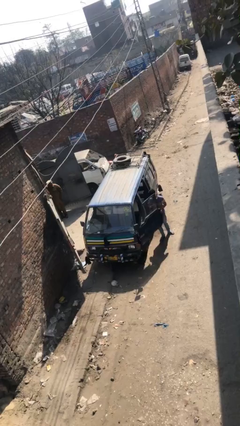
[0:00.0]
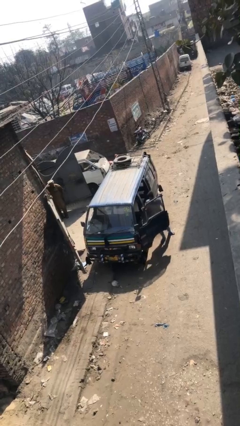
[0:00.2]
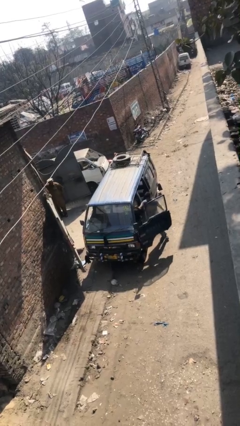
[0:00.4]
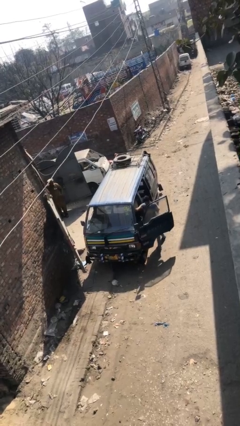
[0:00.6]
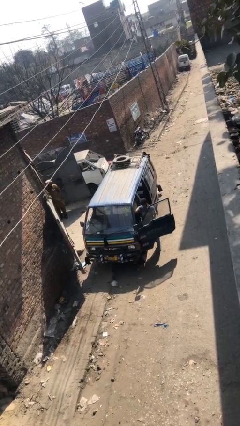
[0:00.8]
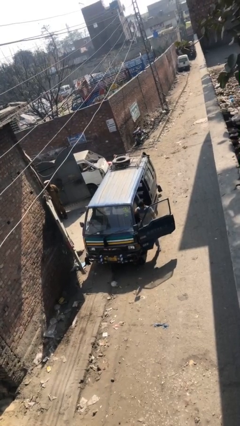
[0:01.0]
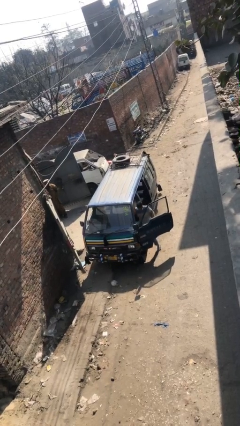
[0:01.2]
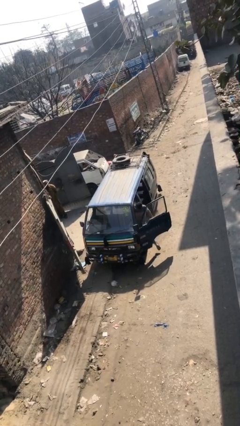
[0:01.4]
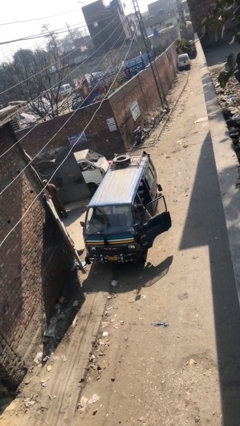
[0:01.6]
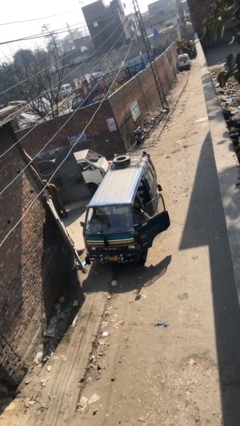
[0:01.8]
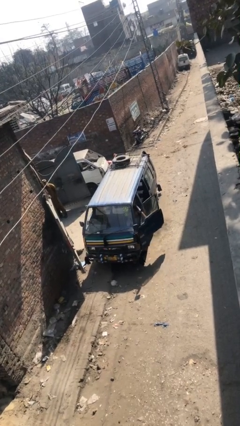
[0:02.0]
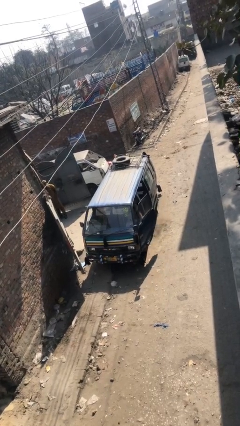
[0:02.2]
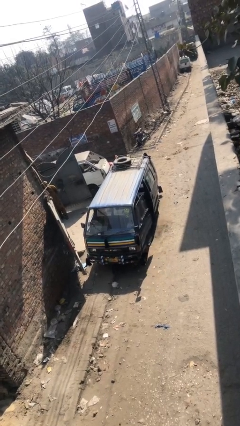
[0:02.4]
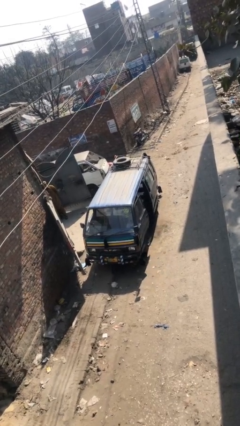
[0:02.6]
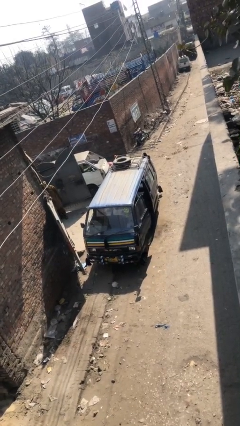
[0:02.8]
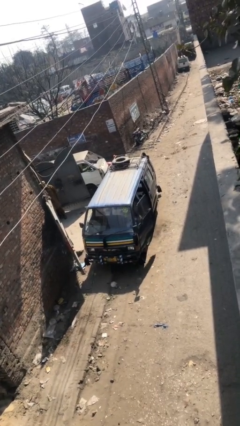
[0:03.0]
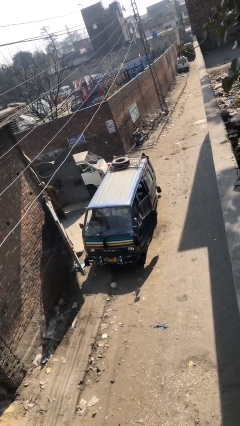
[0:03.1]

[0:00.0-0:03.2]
car picks up person

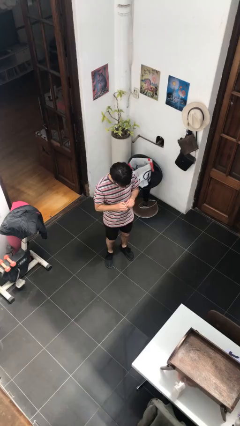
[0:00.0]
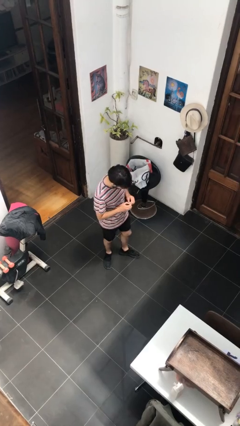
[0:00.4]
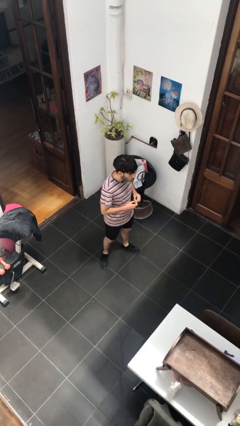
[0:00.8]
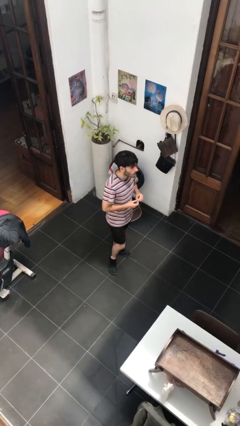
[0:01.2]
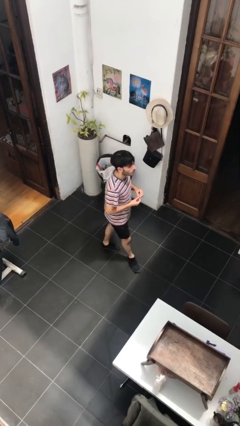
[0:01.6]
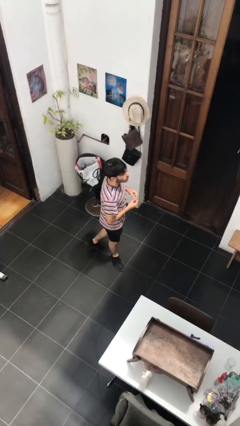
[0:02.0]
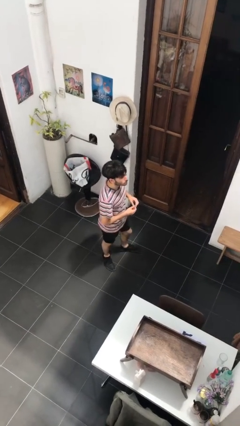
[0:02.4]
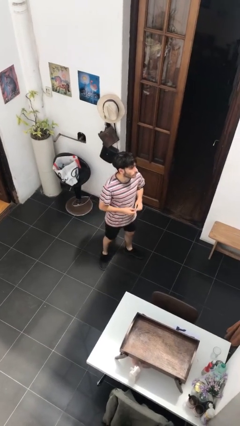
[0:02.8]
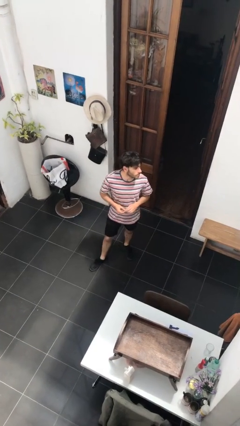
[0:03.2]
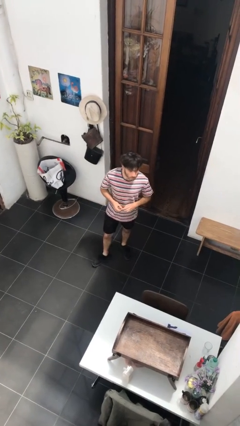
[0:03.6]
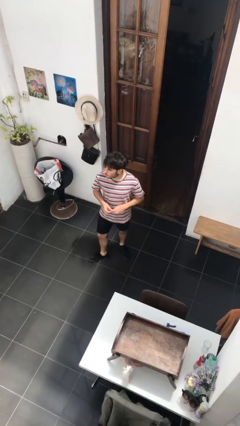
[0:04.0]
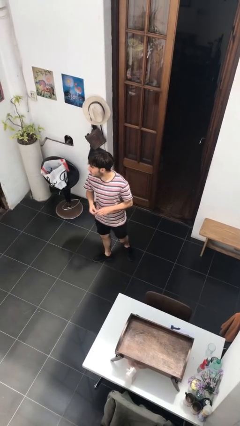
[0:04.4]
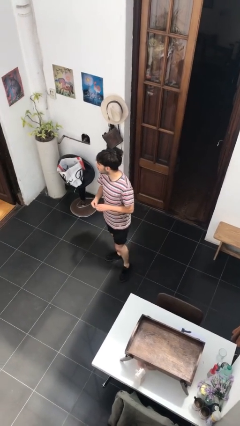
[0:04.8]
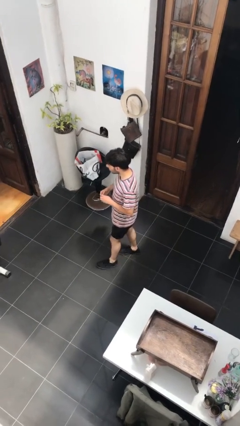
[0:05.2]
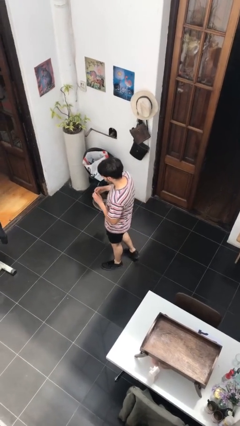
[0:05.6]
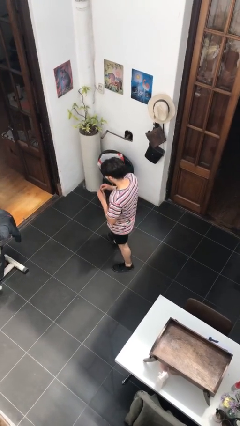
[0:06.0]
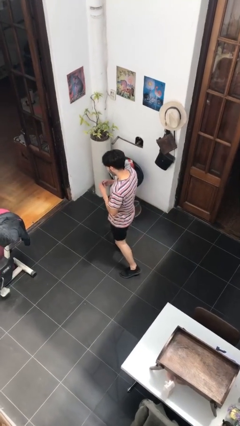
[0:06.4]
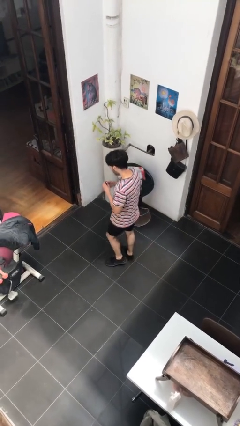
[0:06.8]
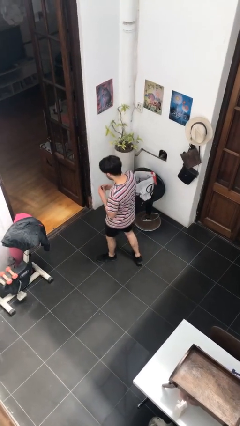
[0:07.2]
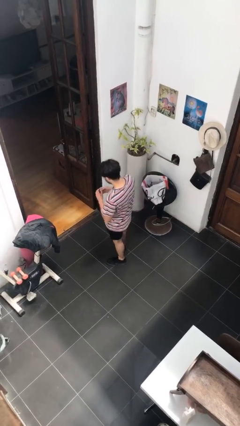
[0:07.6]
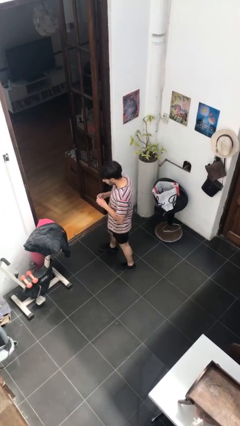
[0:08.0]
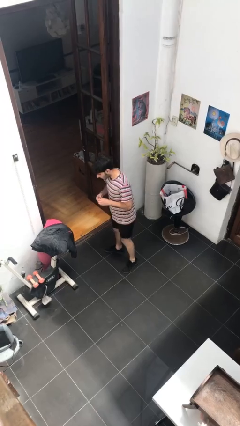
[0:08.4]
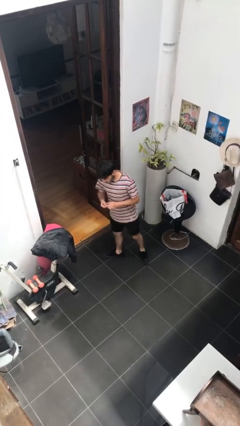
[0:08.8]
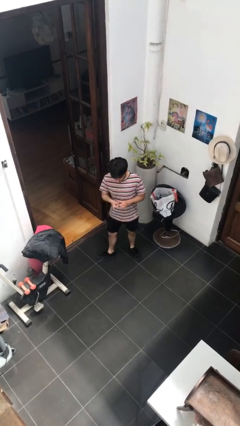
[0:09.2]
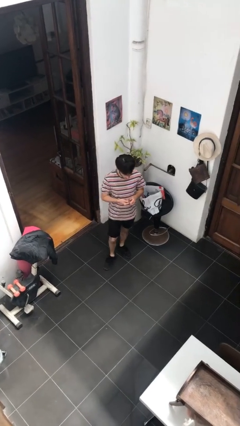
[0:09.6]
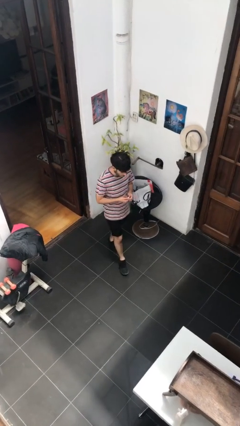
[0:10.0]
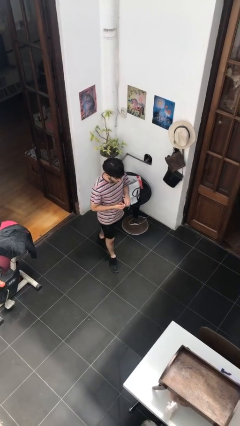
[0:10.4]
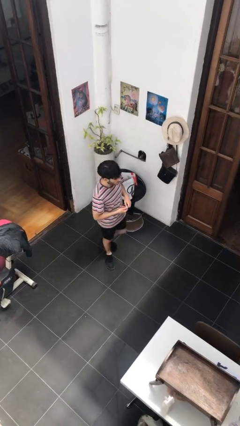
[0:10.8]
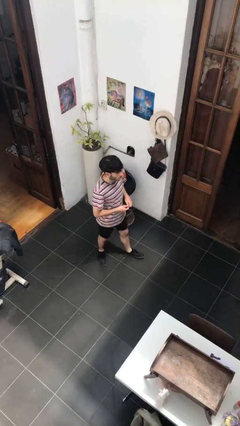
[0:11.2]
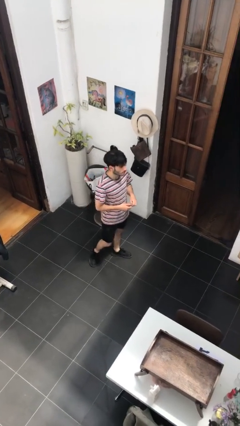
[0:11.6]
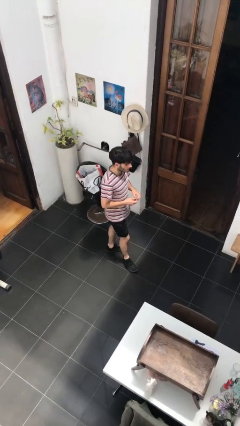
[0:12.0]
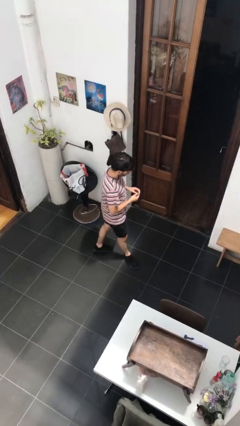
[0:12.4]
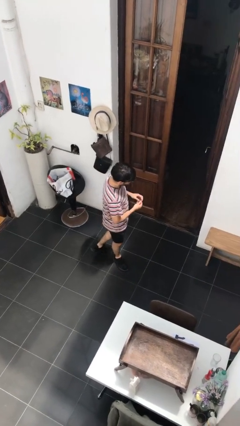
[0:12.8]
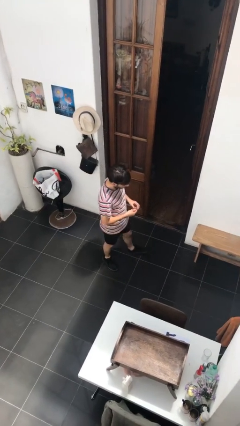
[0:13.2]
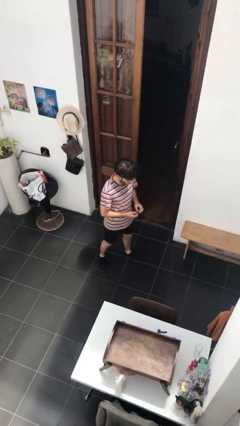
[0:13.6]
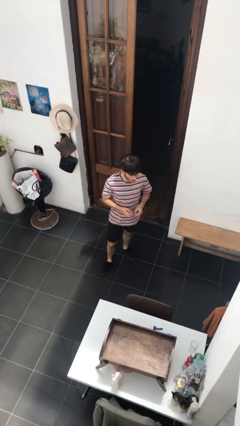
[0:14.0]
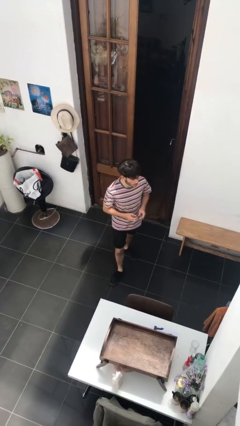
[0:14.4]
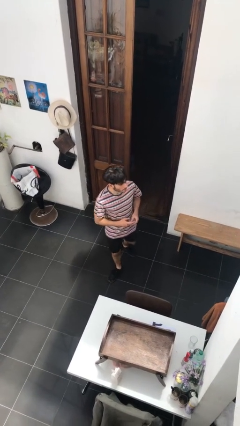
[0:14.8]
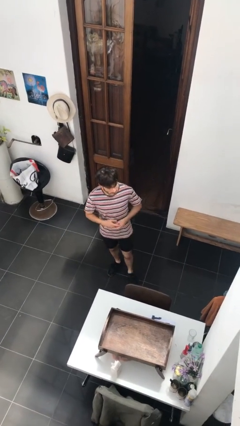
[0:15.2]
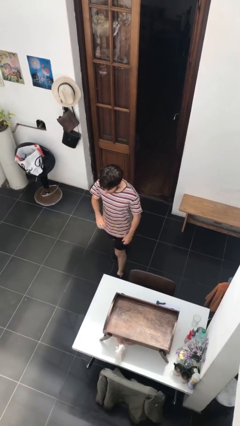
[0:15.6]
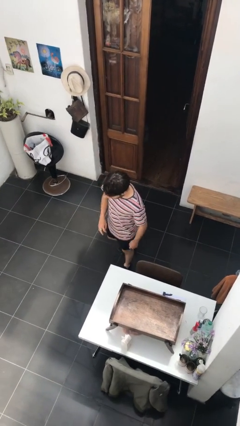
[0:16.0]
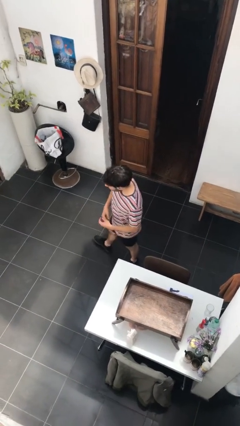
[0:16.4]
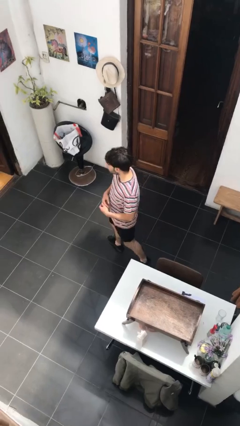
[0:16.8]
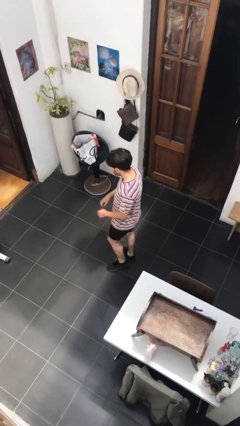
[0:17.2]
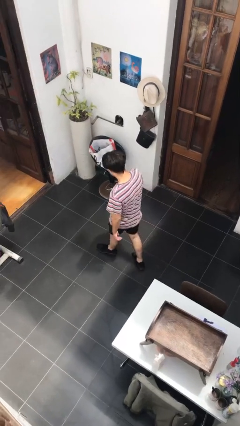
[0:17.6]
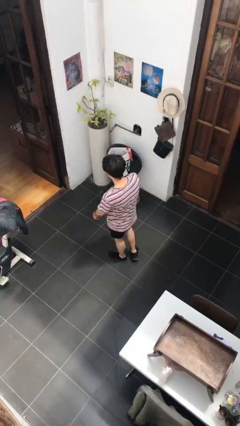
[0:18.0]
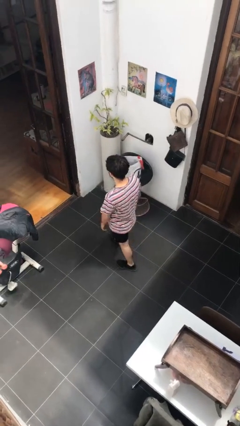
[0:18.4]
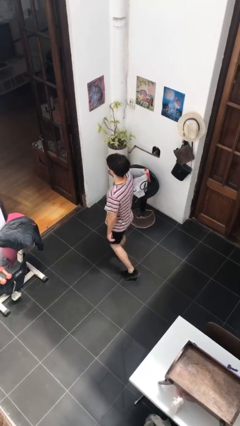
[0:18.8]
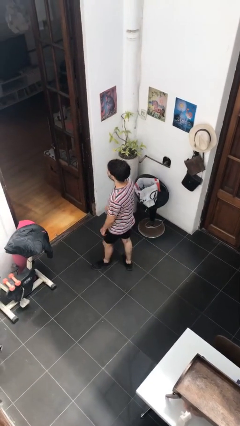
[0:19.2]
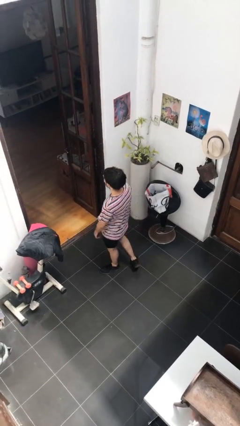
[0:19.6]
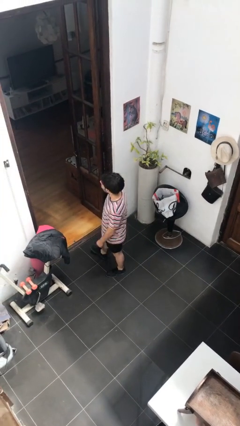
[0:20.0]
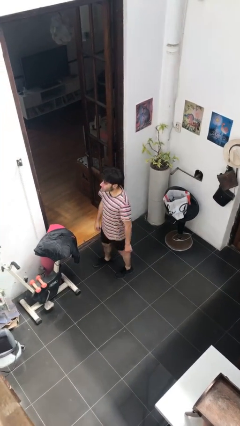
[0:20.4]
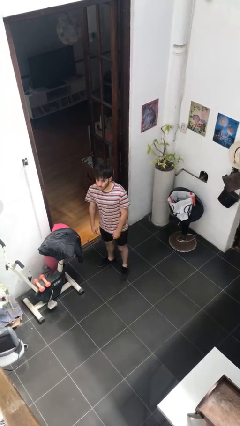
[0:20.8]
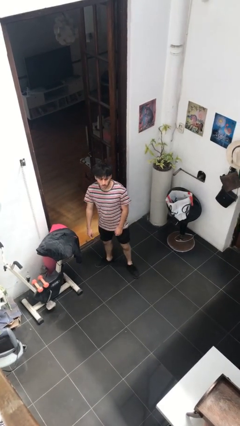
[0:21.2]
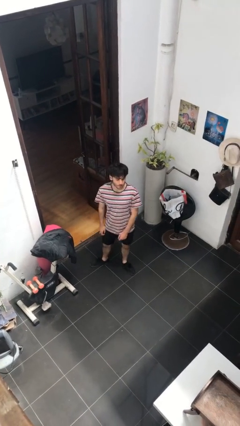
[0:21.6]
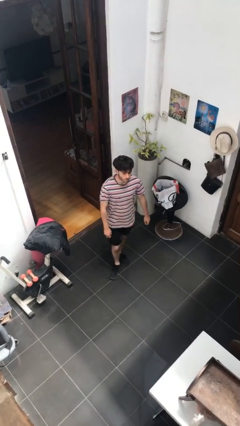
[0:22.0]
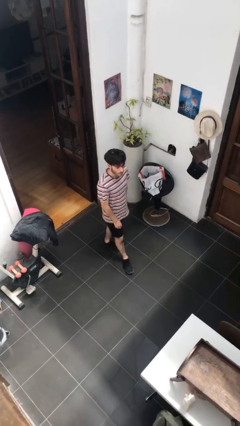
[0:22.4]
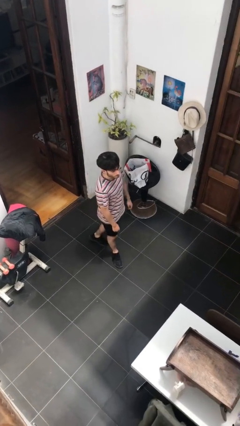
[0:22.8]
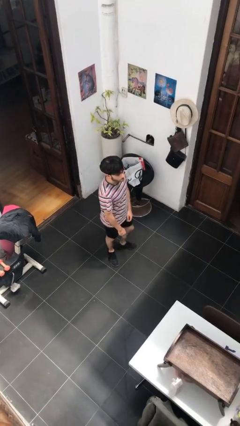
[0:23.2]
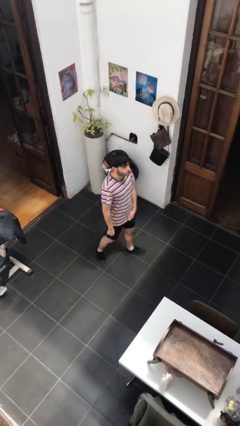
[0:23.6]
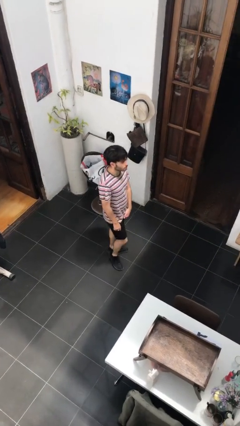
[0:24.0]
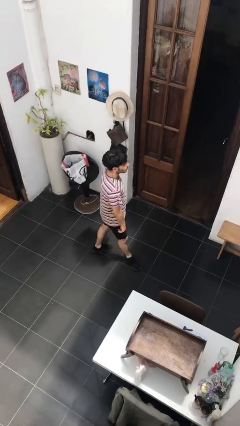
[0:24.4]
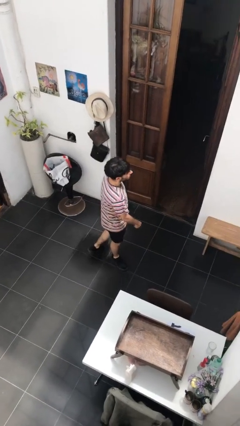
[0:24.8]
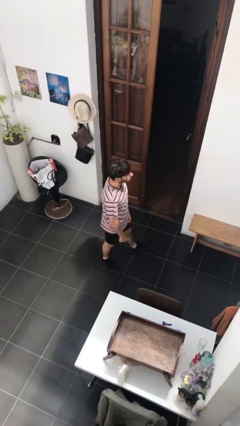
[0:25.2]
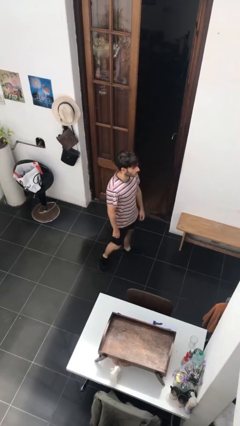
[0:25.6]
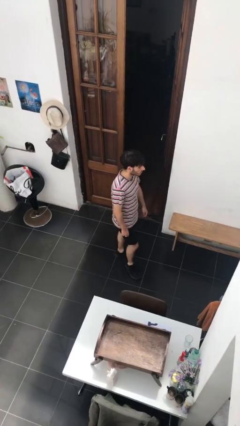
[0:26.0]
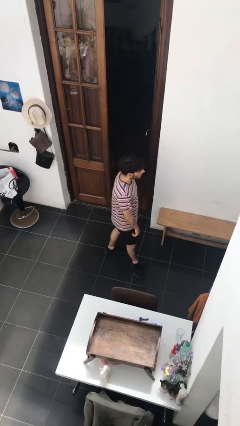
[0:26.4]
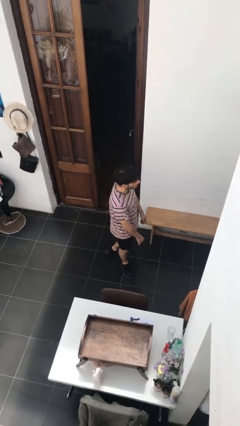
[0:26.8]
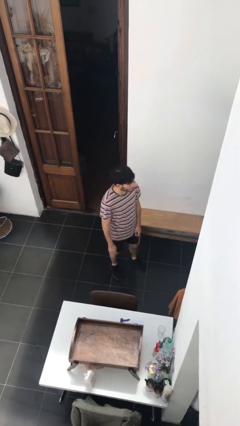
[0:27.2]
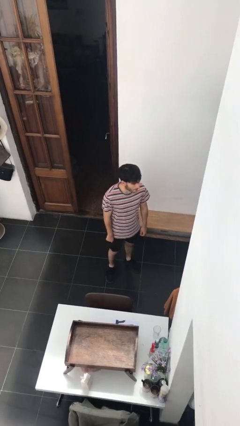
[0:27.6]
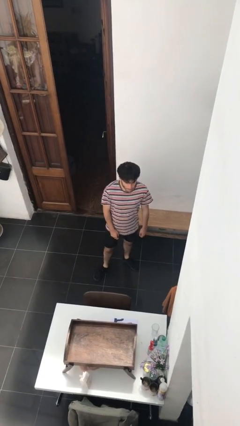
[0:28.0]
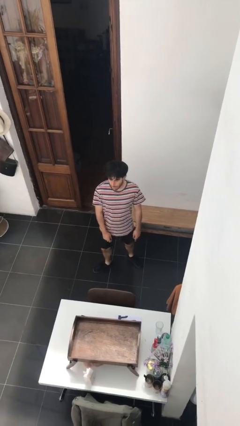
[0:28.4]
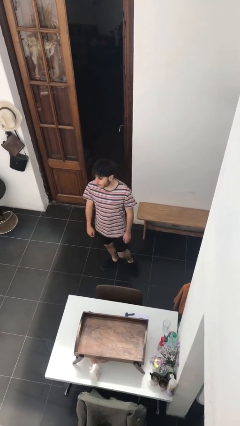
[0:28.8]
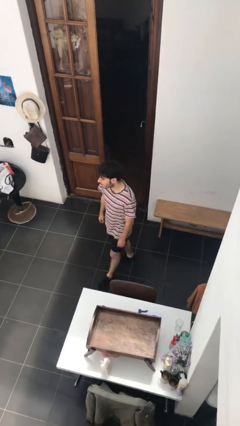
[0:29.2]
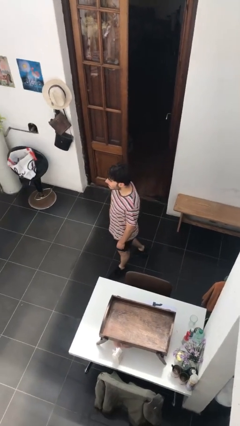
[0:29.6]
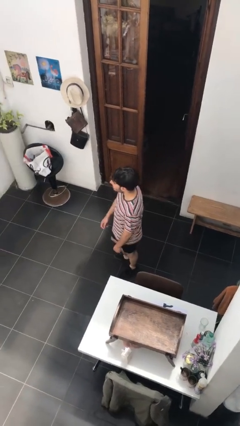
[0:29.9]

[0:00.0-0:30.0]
person walks
